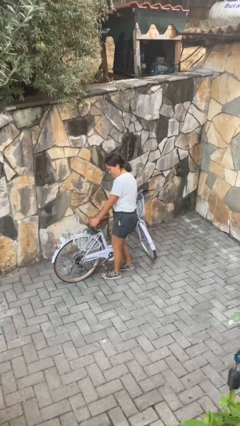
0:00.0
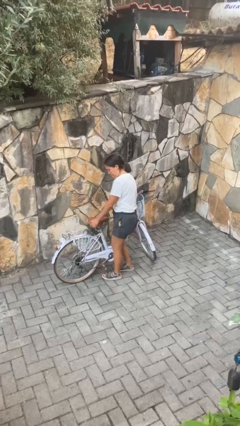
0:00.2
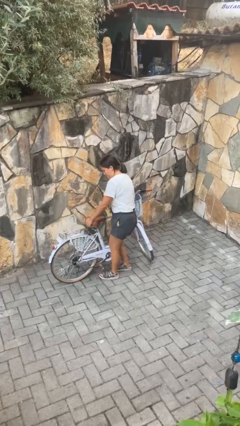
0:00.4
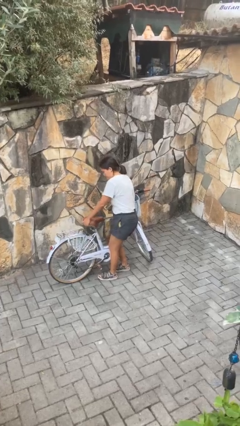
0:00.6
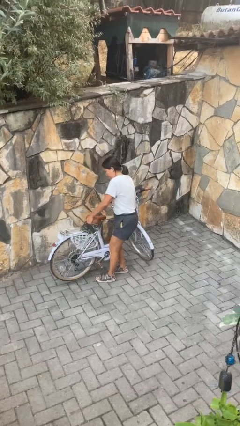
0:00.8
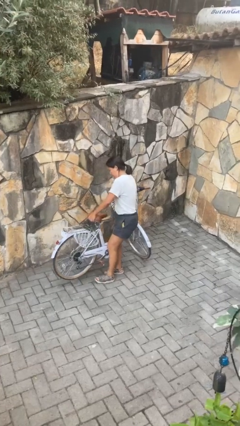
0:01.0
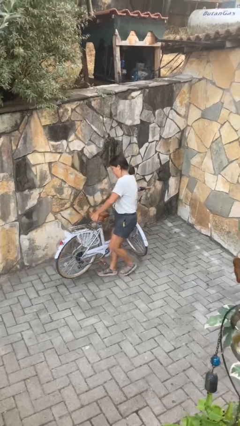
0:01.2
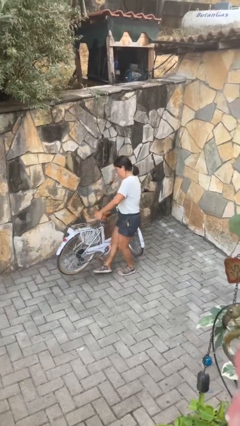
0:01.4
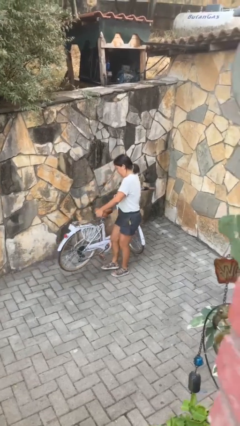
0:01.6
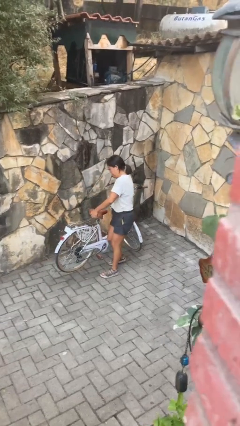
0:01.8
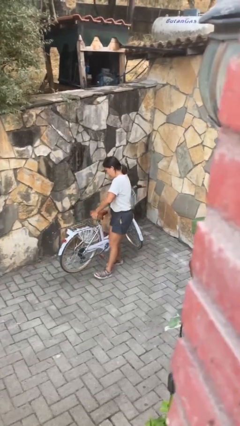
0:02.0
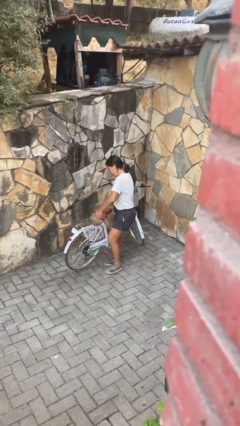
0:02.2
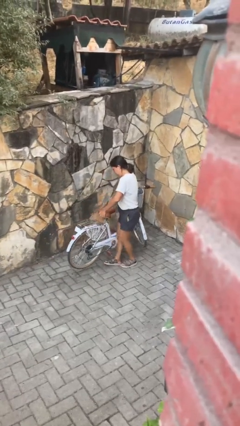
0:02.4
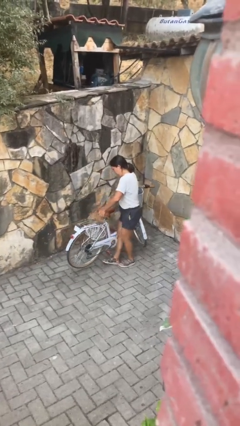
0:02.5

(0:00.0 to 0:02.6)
person carries bicycle

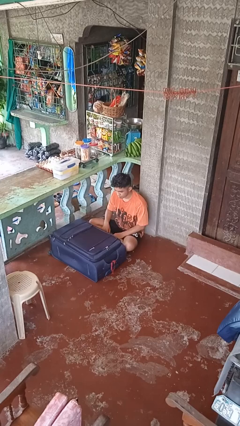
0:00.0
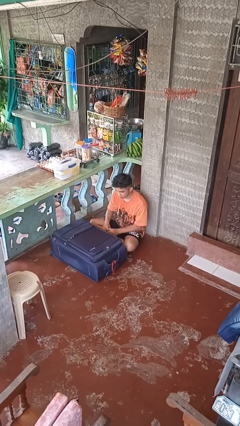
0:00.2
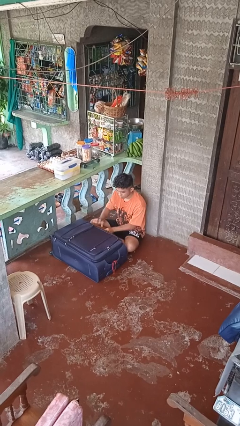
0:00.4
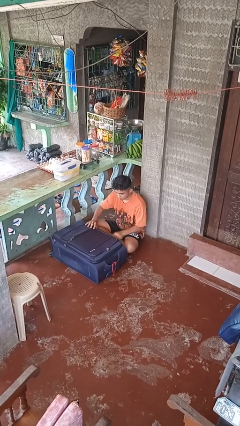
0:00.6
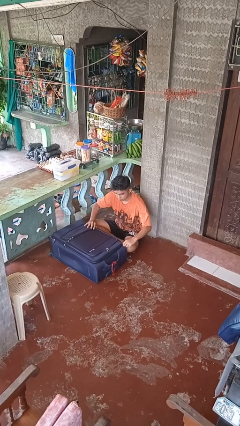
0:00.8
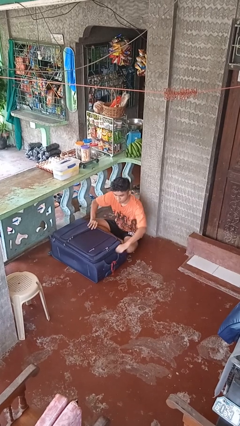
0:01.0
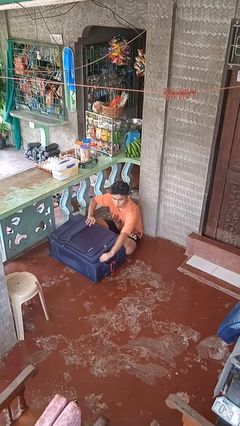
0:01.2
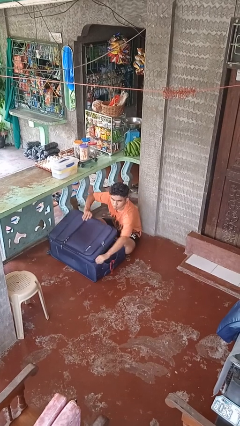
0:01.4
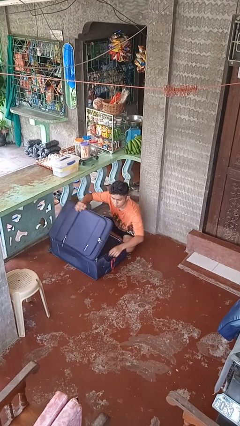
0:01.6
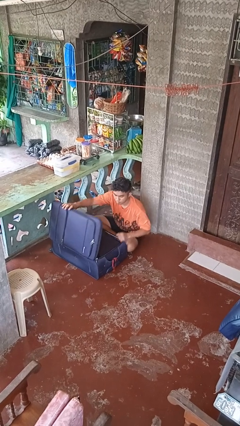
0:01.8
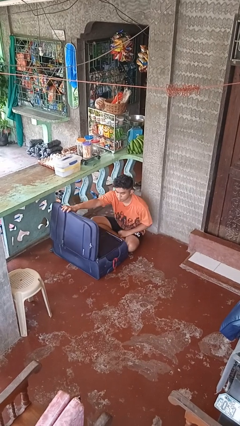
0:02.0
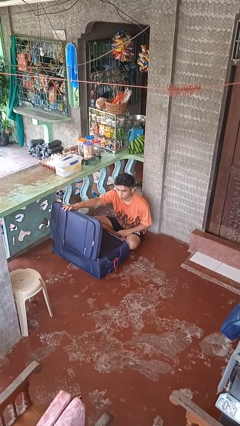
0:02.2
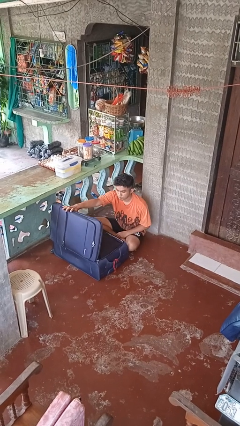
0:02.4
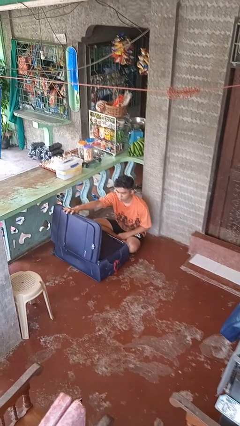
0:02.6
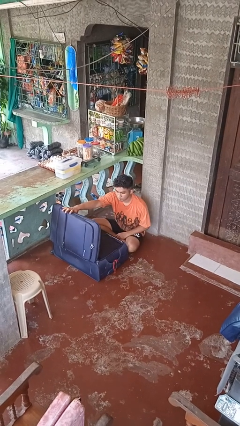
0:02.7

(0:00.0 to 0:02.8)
person opens suitcase

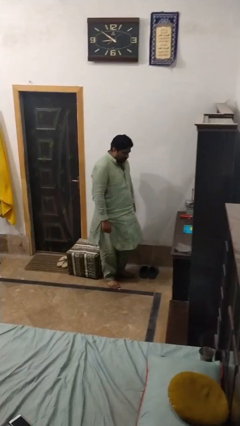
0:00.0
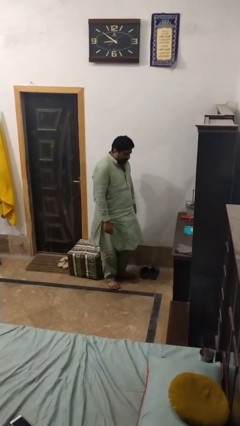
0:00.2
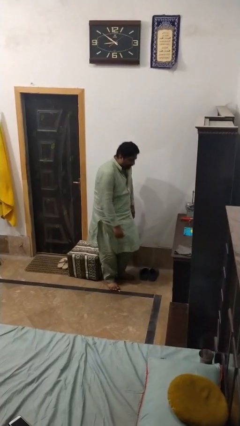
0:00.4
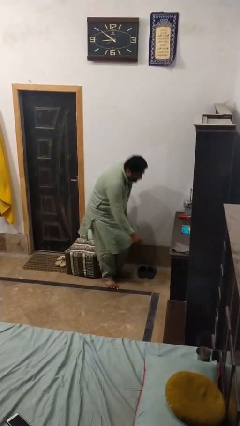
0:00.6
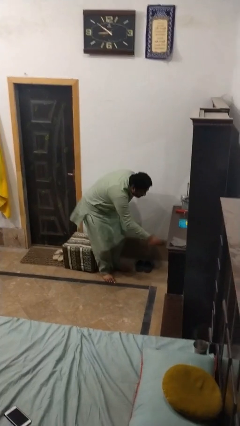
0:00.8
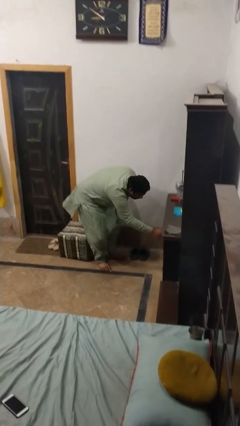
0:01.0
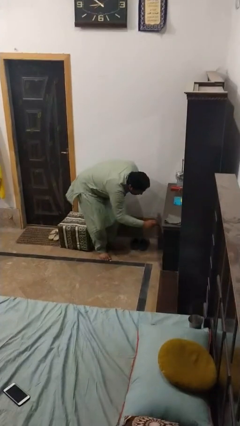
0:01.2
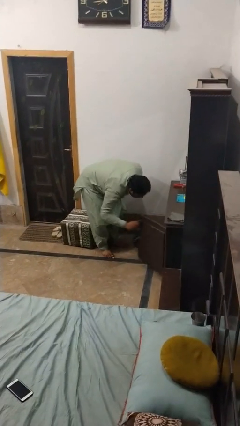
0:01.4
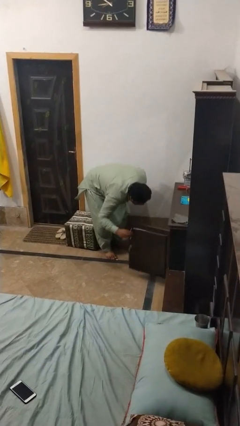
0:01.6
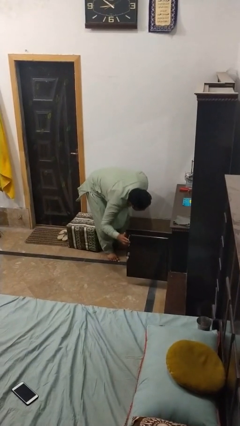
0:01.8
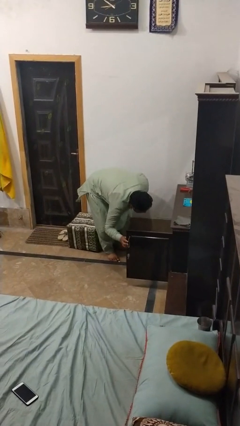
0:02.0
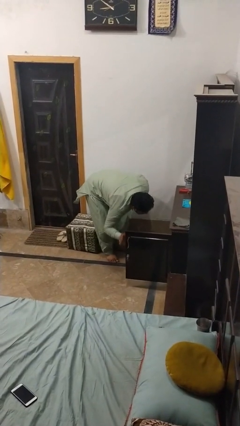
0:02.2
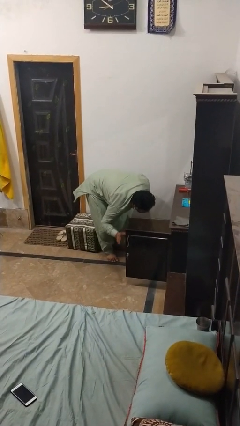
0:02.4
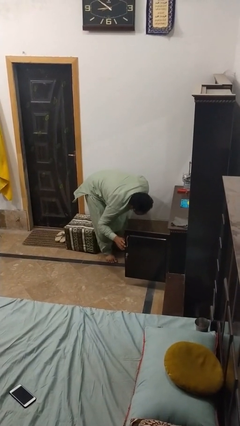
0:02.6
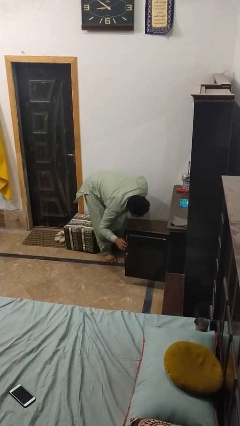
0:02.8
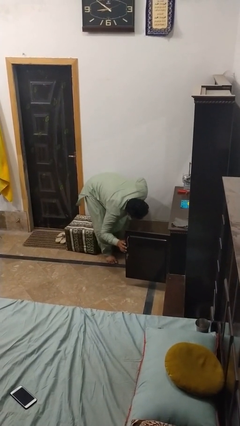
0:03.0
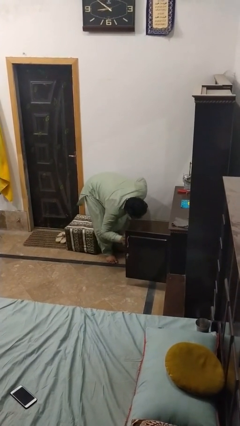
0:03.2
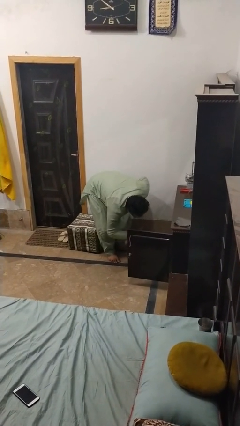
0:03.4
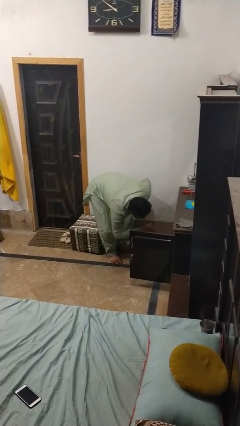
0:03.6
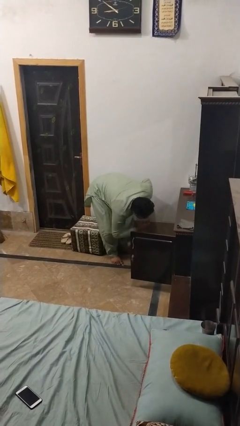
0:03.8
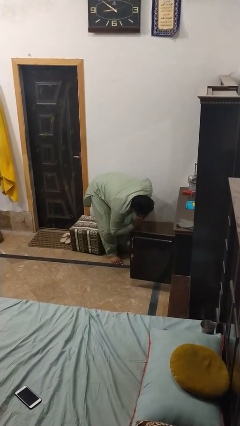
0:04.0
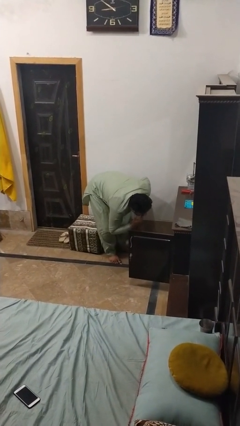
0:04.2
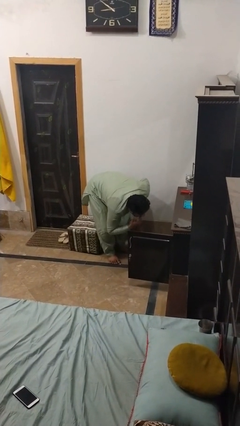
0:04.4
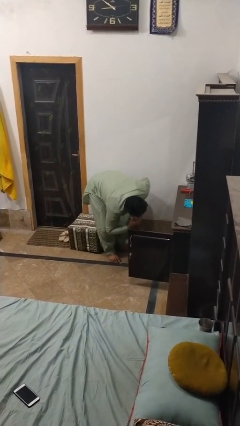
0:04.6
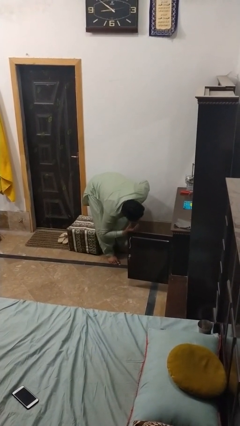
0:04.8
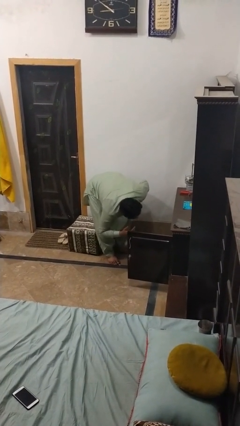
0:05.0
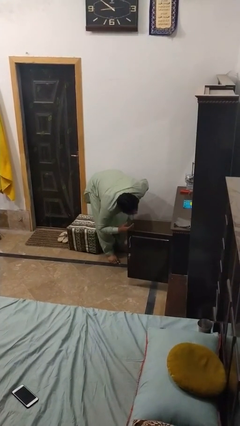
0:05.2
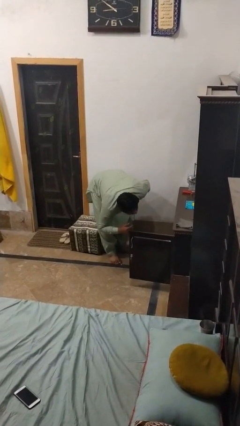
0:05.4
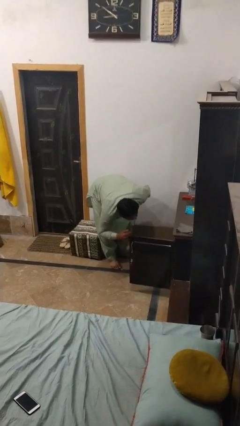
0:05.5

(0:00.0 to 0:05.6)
person searches in cabinet

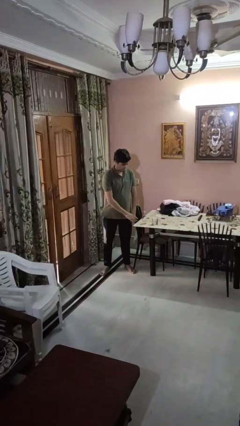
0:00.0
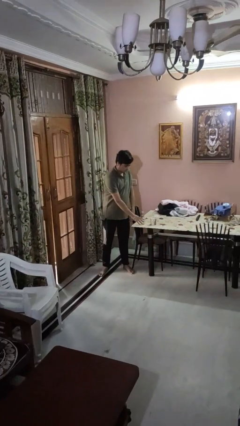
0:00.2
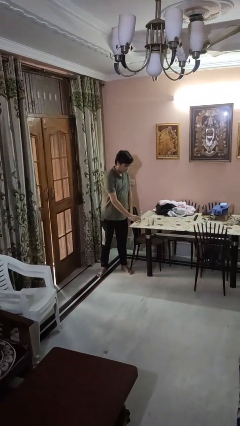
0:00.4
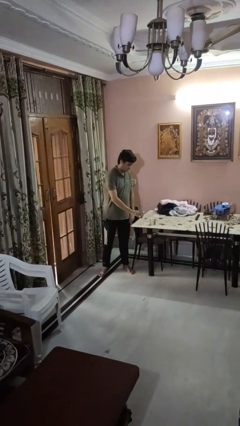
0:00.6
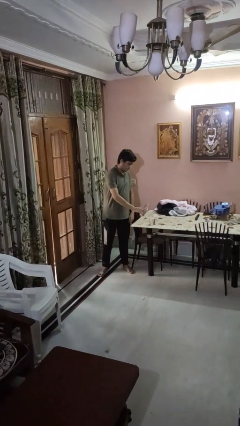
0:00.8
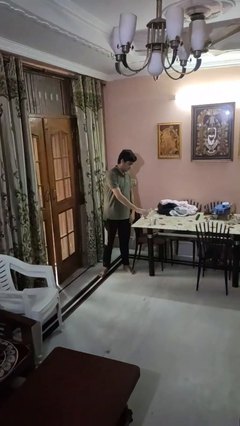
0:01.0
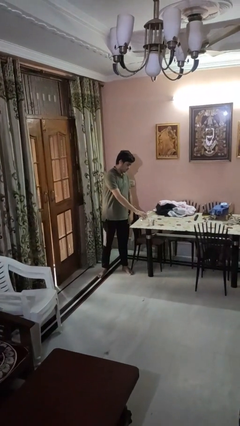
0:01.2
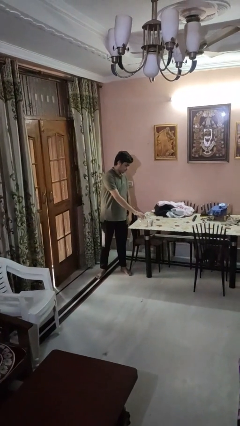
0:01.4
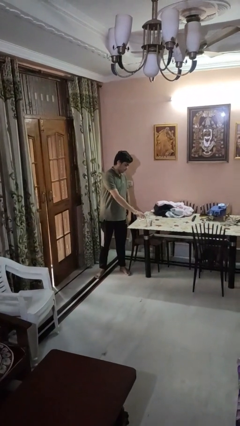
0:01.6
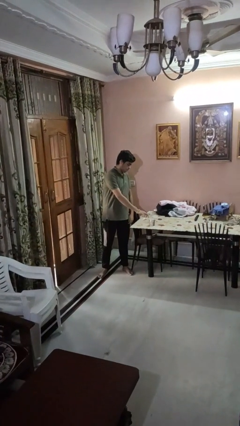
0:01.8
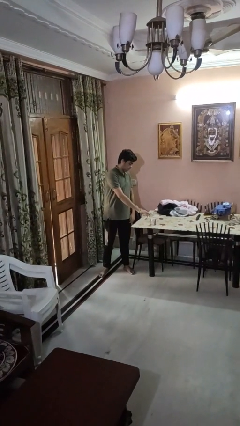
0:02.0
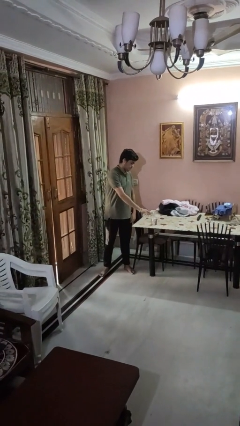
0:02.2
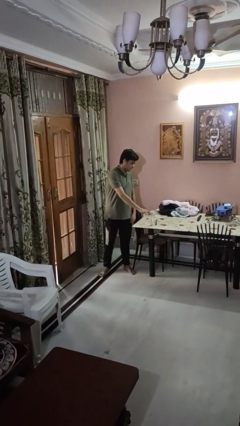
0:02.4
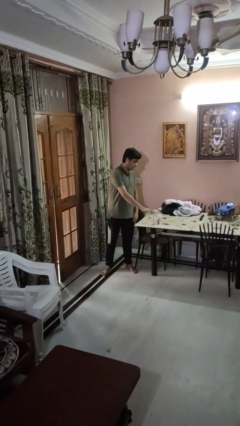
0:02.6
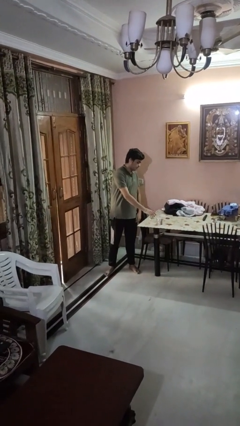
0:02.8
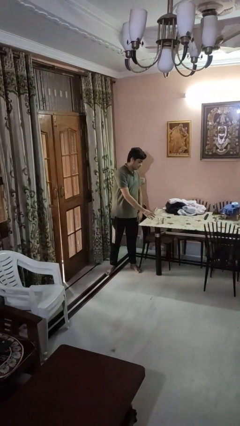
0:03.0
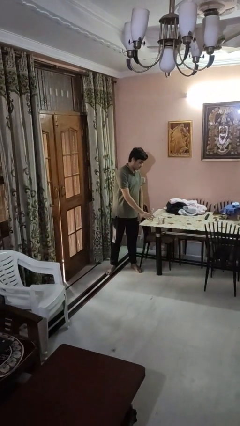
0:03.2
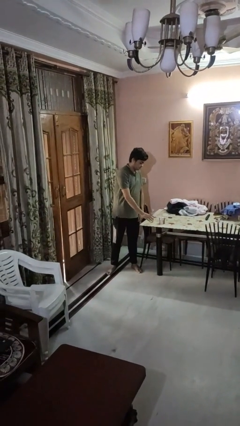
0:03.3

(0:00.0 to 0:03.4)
person pours liquid into cup

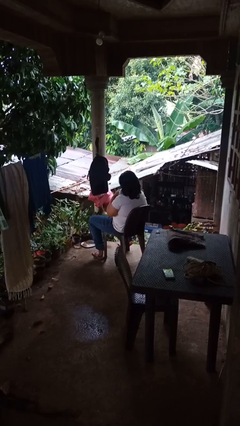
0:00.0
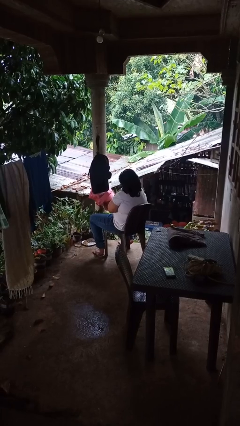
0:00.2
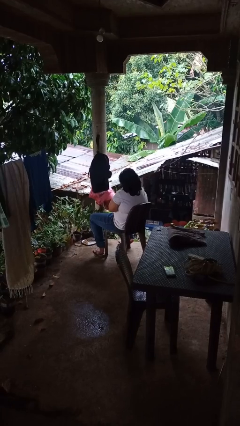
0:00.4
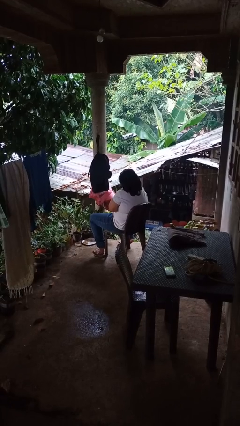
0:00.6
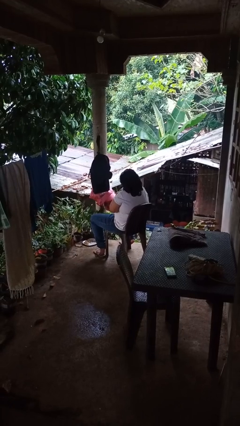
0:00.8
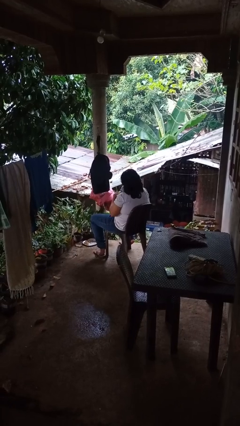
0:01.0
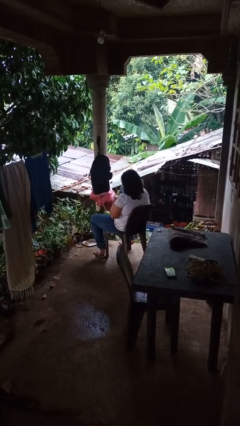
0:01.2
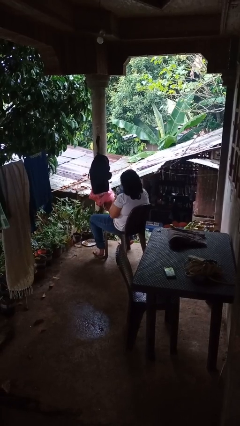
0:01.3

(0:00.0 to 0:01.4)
person hugs stuffed animal

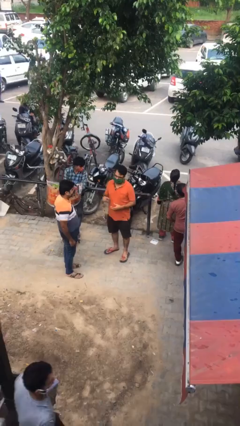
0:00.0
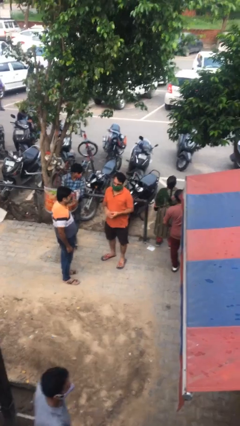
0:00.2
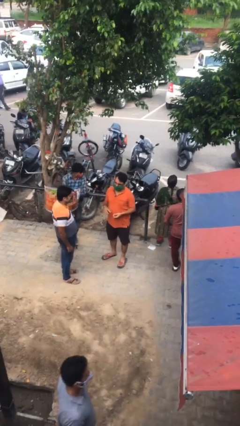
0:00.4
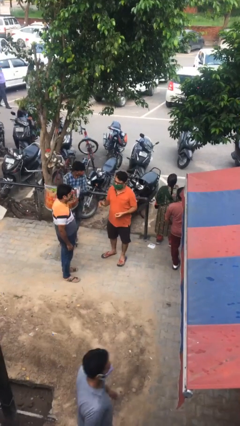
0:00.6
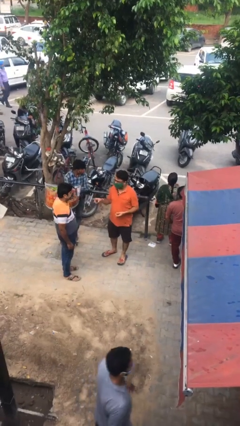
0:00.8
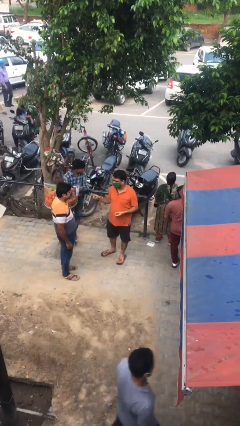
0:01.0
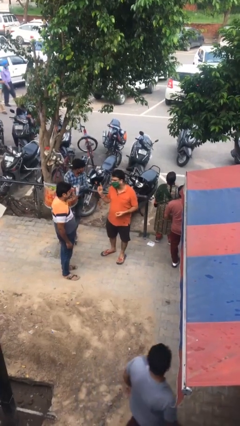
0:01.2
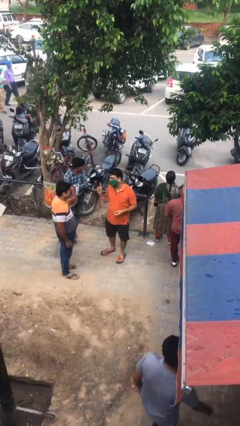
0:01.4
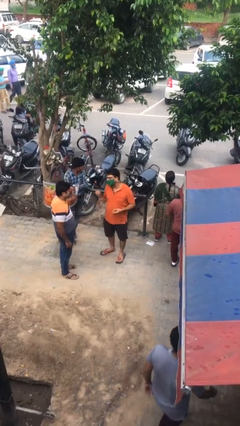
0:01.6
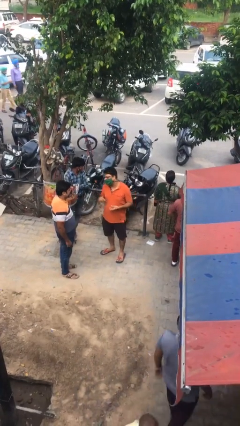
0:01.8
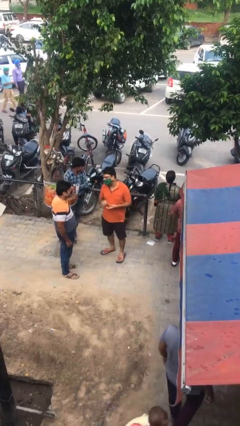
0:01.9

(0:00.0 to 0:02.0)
person talks to person
